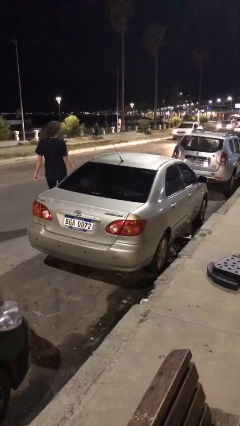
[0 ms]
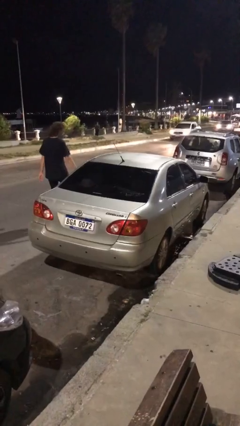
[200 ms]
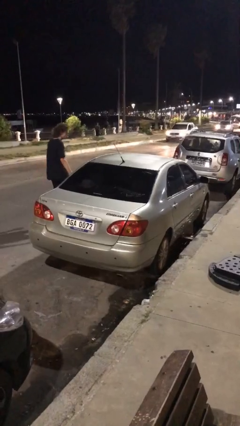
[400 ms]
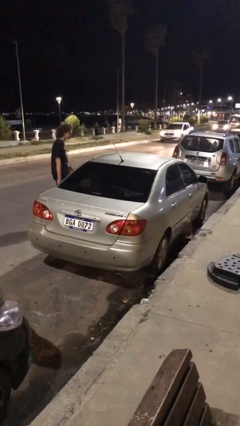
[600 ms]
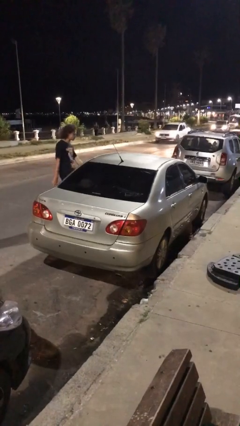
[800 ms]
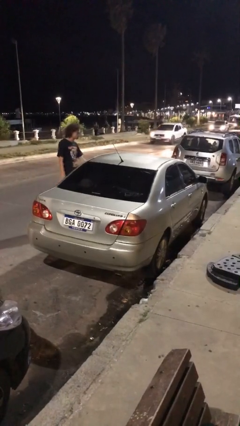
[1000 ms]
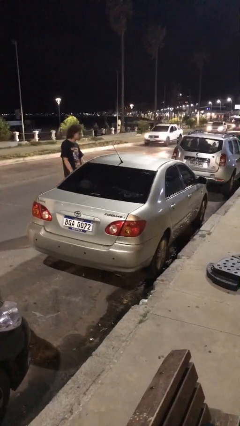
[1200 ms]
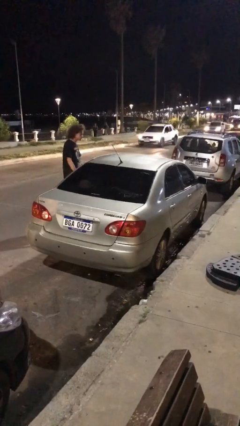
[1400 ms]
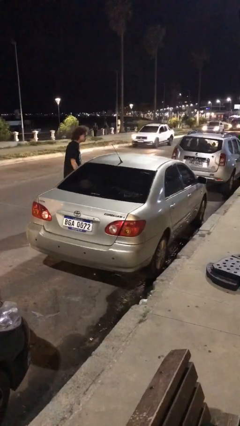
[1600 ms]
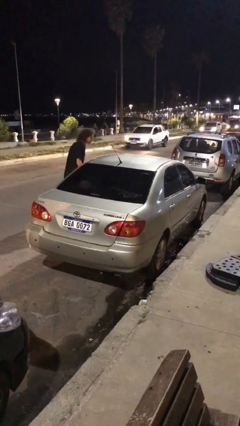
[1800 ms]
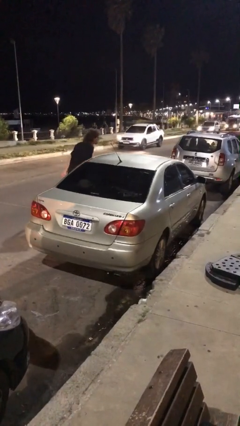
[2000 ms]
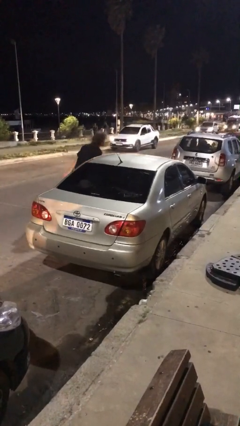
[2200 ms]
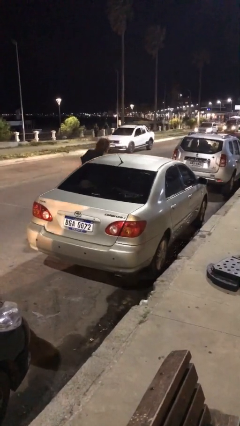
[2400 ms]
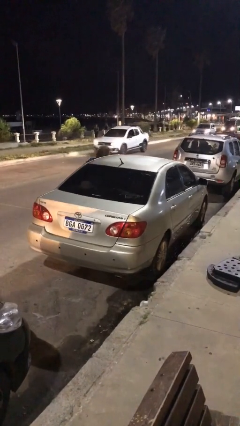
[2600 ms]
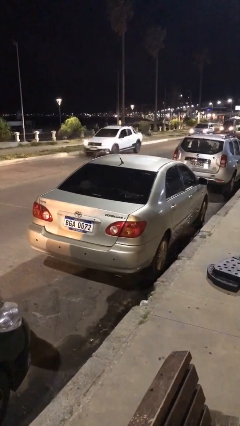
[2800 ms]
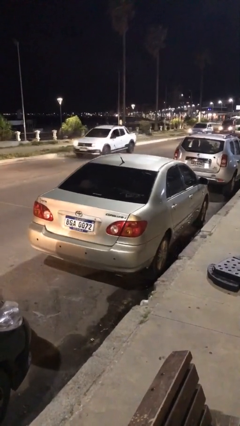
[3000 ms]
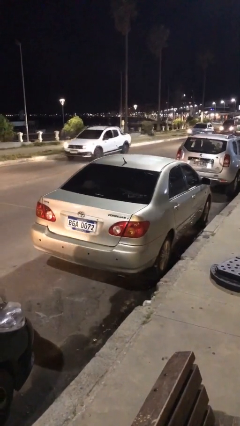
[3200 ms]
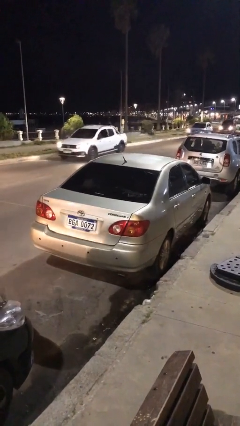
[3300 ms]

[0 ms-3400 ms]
car picks up person

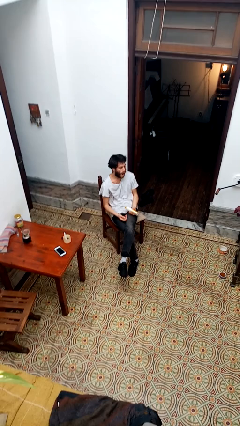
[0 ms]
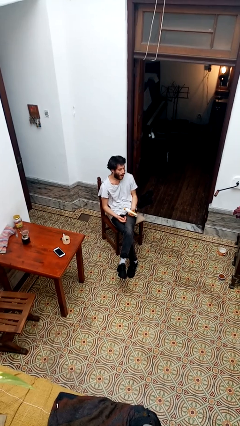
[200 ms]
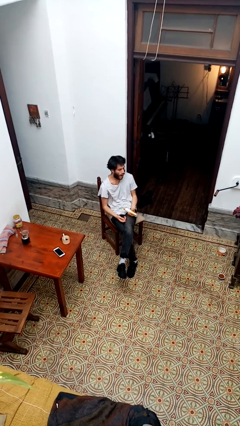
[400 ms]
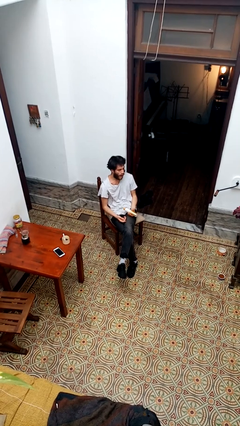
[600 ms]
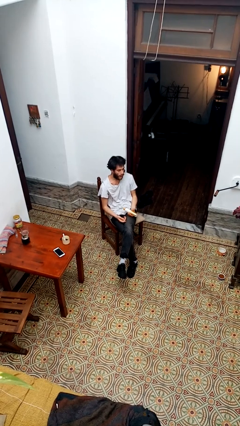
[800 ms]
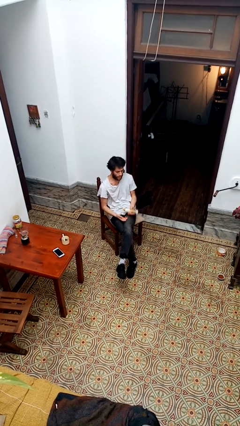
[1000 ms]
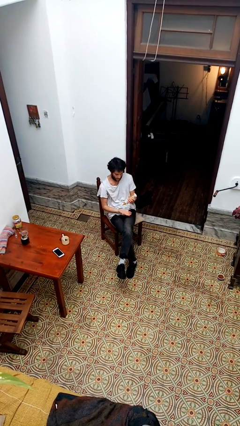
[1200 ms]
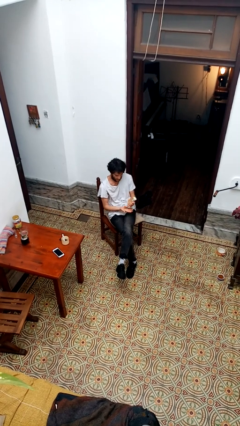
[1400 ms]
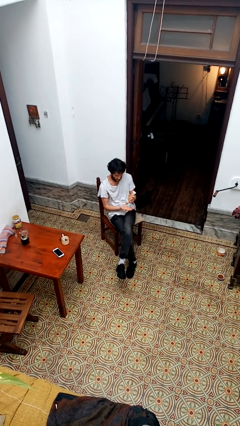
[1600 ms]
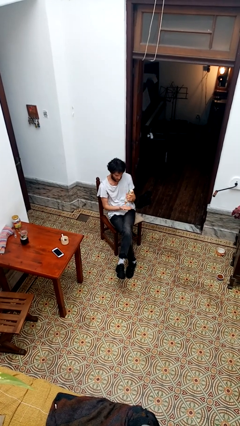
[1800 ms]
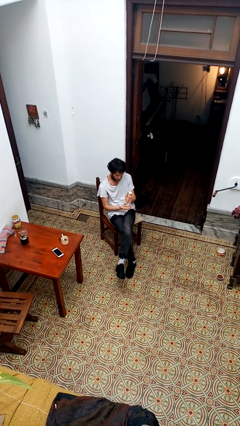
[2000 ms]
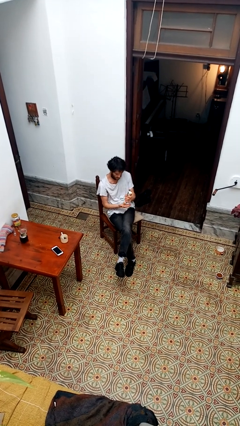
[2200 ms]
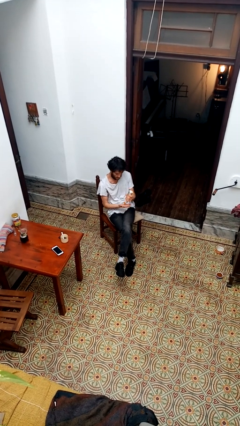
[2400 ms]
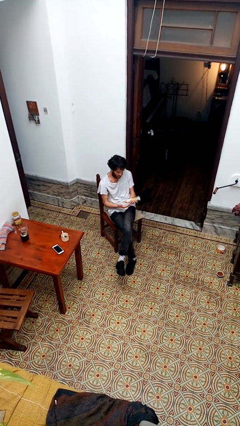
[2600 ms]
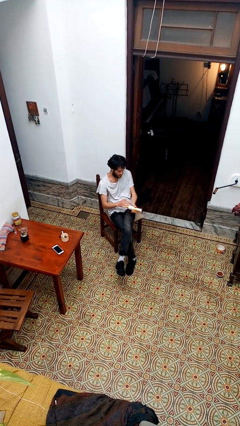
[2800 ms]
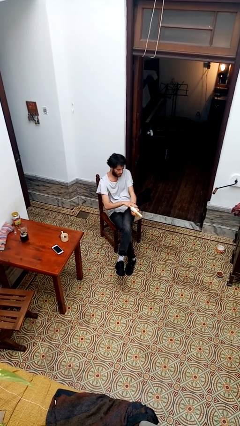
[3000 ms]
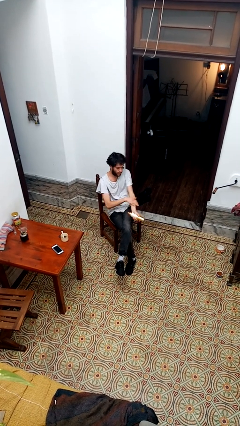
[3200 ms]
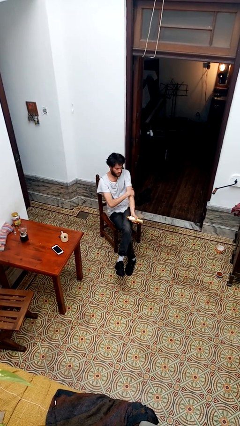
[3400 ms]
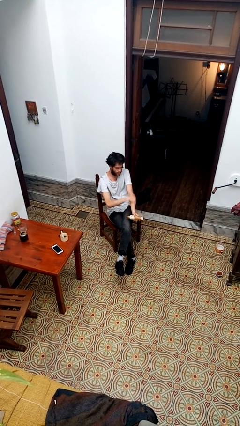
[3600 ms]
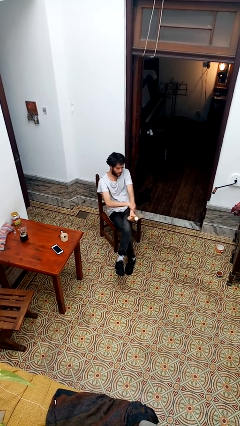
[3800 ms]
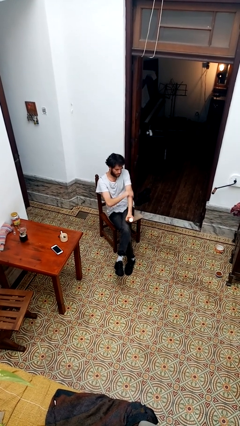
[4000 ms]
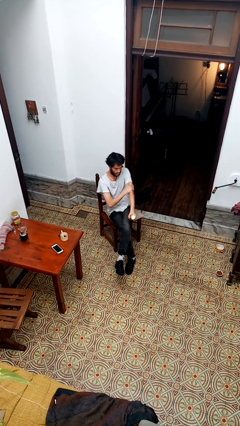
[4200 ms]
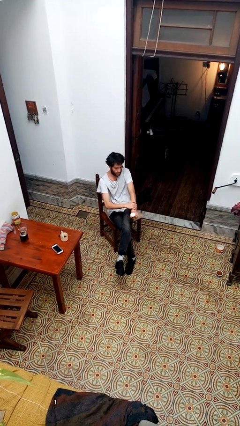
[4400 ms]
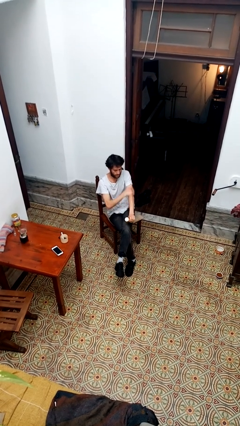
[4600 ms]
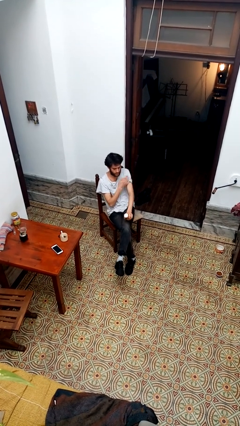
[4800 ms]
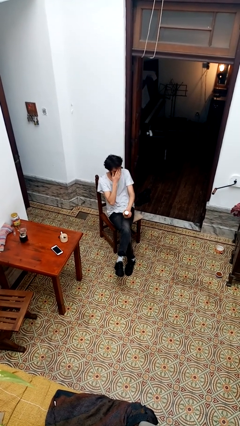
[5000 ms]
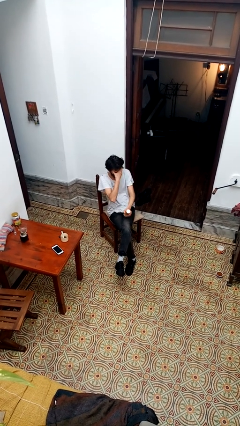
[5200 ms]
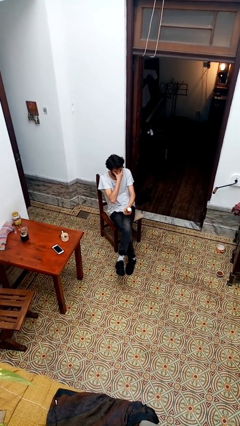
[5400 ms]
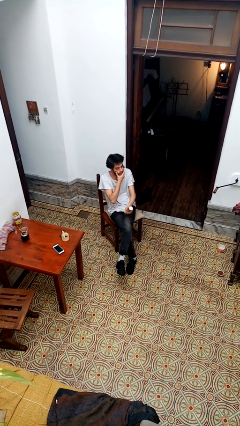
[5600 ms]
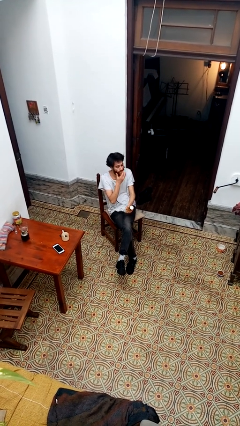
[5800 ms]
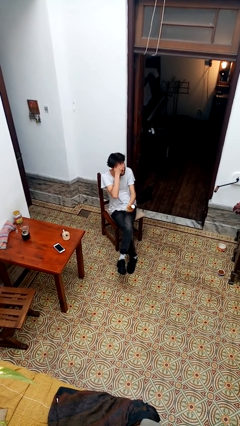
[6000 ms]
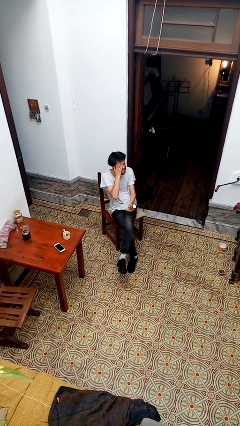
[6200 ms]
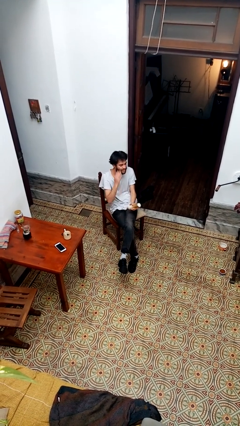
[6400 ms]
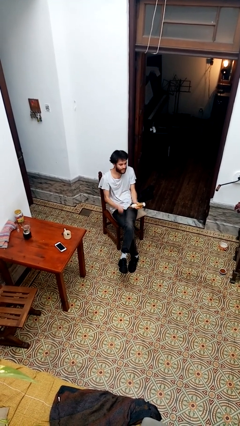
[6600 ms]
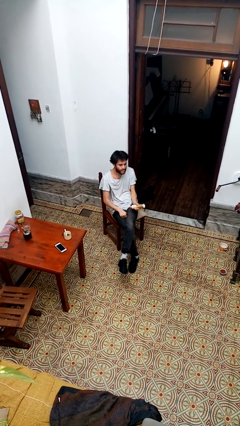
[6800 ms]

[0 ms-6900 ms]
person applies sunscreen

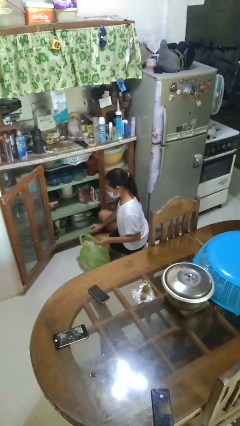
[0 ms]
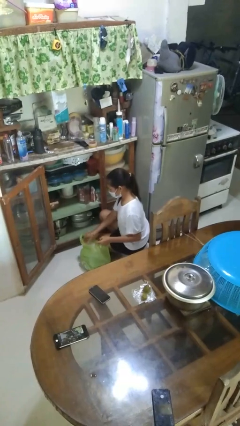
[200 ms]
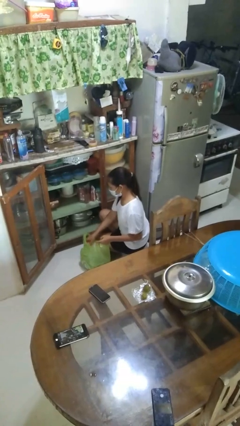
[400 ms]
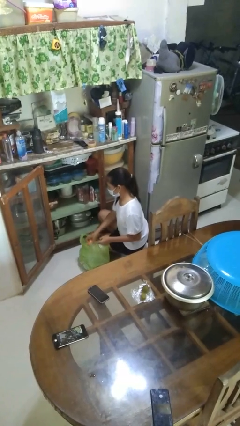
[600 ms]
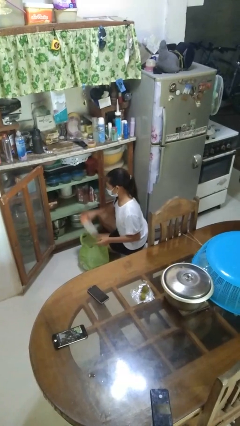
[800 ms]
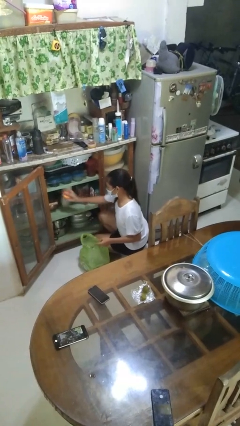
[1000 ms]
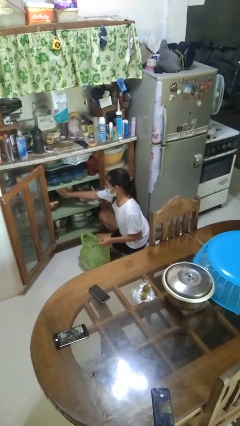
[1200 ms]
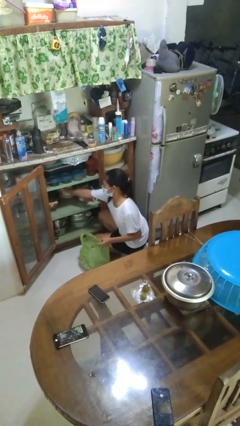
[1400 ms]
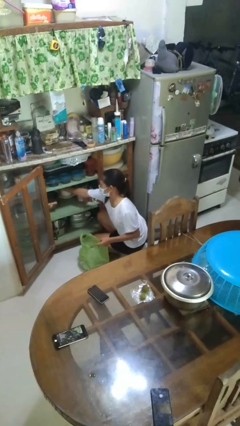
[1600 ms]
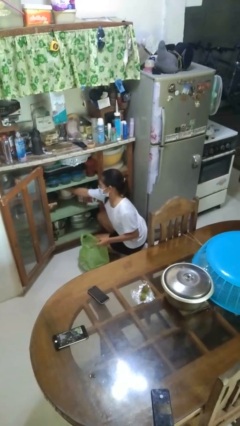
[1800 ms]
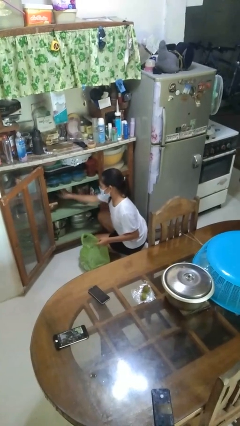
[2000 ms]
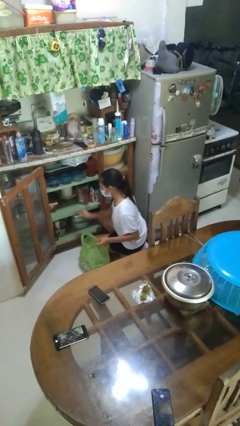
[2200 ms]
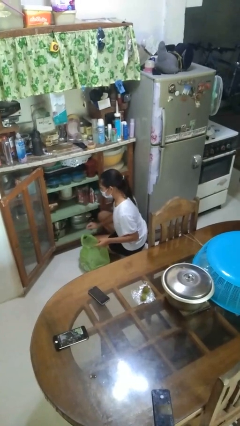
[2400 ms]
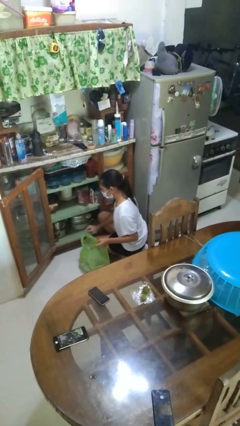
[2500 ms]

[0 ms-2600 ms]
person loads groceries into cabinet

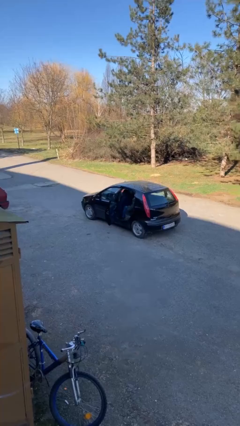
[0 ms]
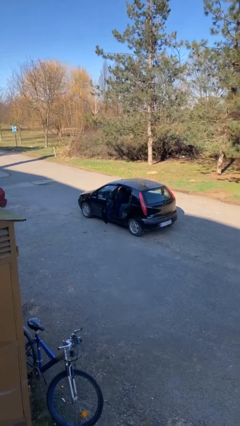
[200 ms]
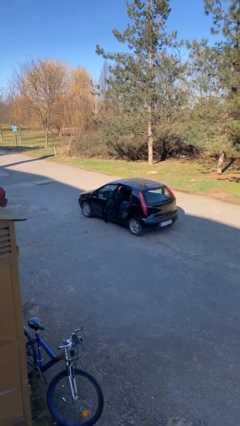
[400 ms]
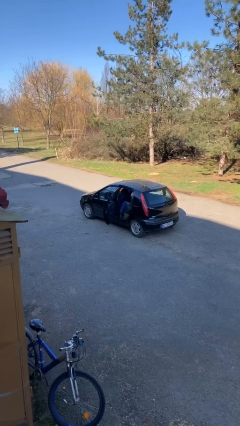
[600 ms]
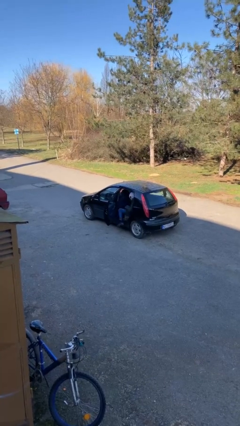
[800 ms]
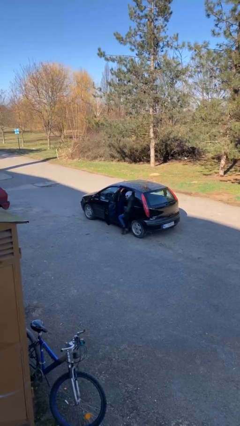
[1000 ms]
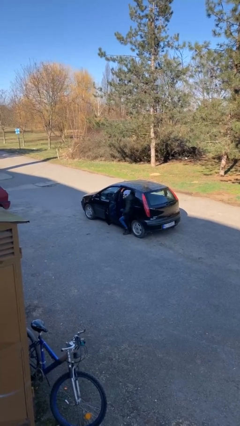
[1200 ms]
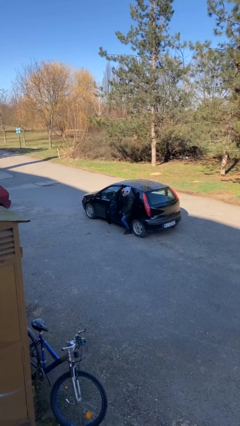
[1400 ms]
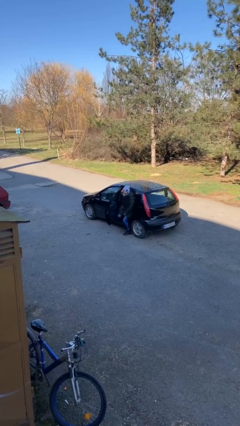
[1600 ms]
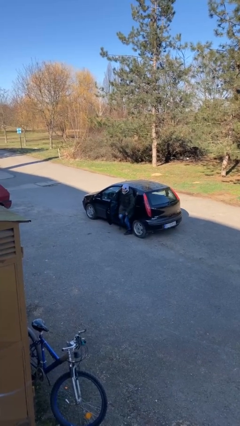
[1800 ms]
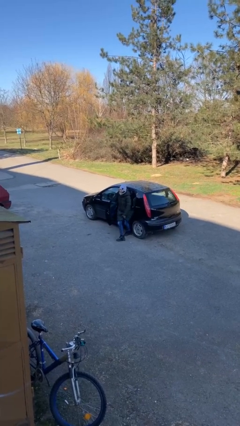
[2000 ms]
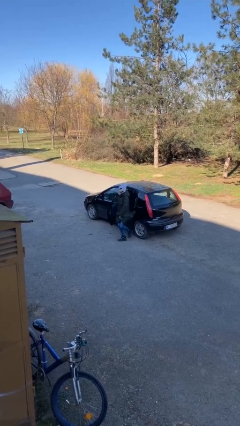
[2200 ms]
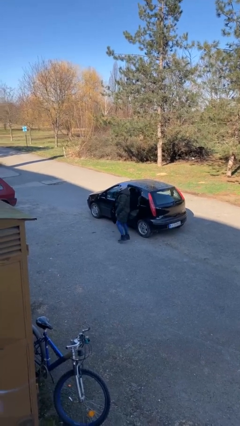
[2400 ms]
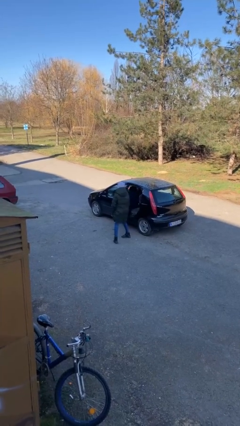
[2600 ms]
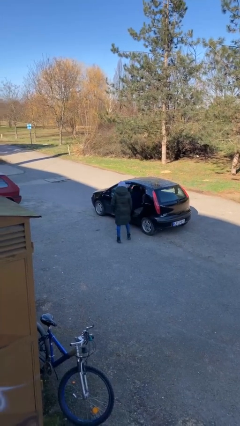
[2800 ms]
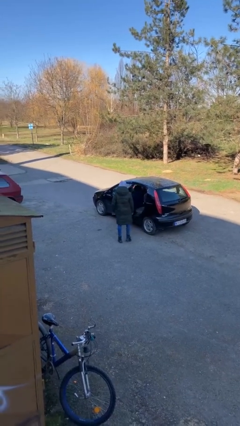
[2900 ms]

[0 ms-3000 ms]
person exits car

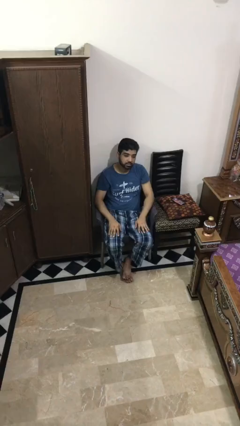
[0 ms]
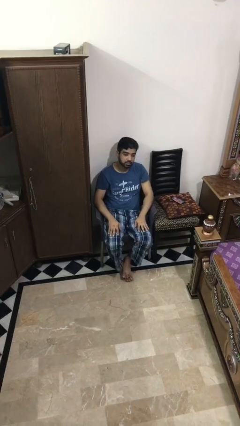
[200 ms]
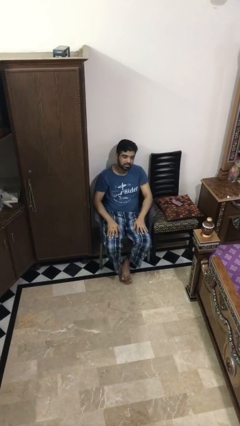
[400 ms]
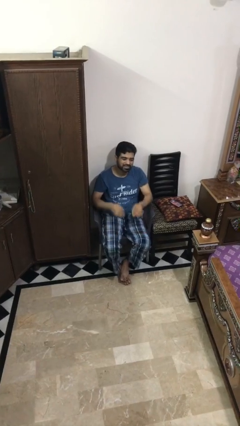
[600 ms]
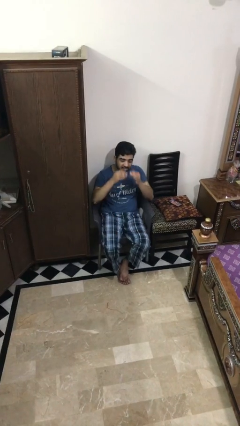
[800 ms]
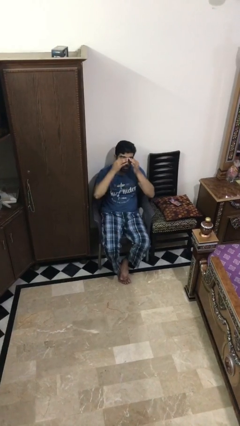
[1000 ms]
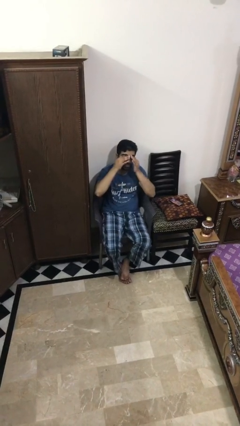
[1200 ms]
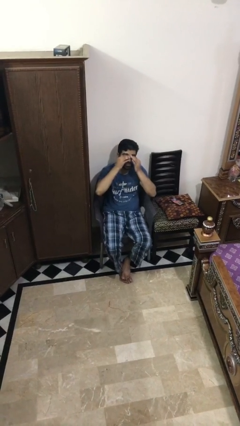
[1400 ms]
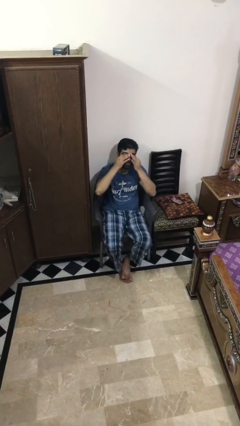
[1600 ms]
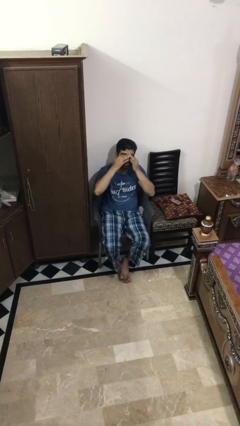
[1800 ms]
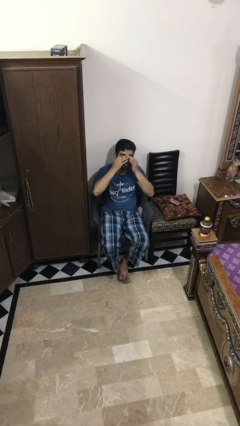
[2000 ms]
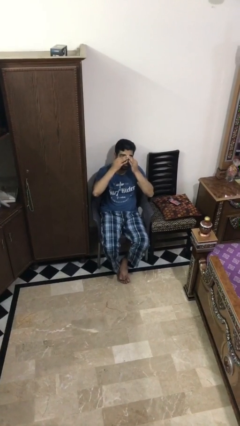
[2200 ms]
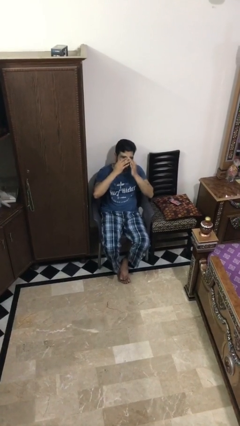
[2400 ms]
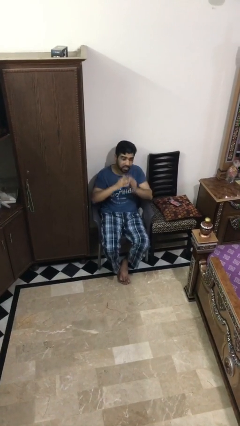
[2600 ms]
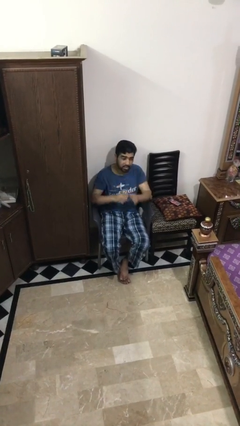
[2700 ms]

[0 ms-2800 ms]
person rubs eyes
